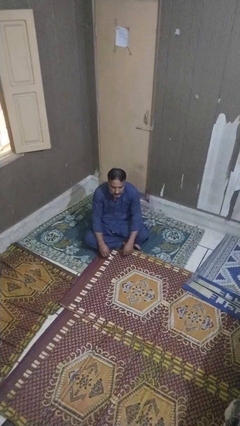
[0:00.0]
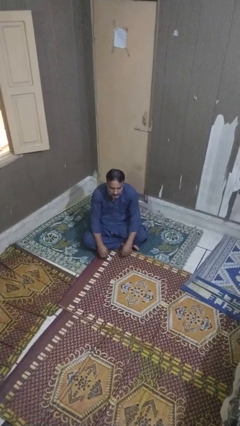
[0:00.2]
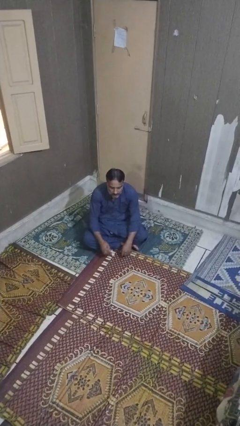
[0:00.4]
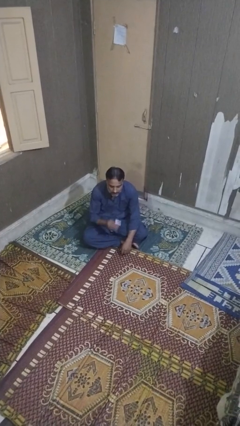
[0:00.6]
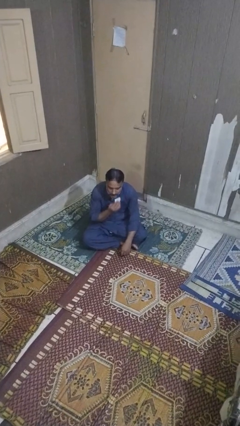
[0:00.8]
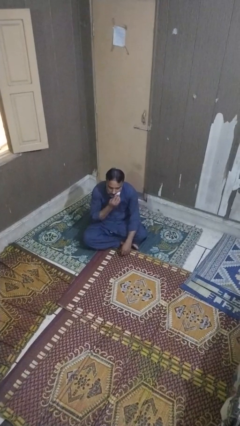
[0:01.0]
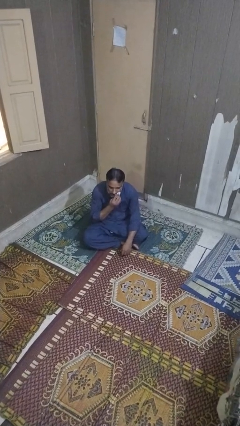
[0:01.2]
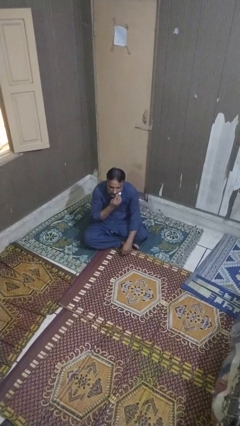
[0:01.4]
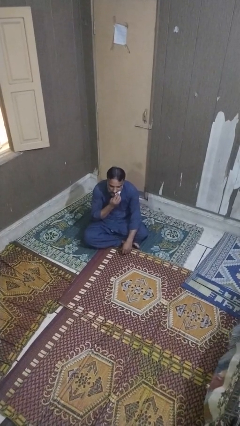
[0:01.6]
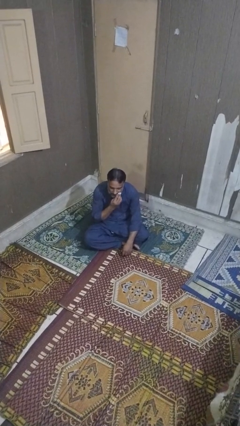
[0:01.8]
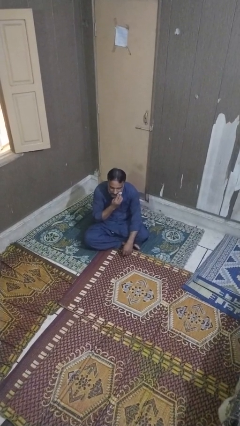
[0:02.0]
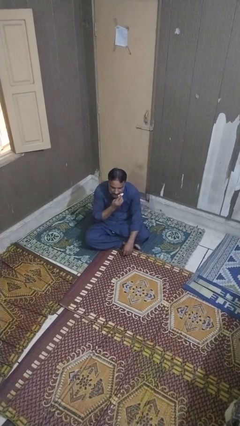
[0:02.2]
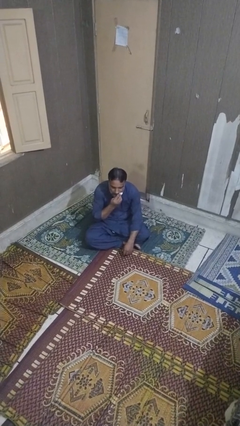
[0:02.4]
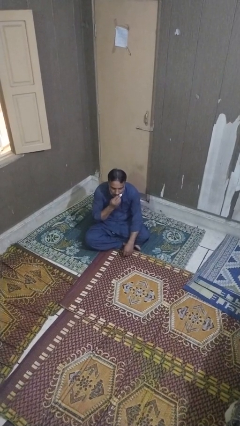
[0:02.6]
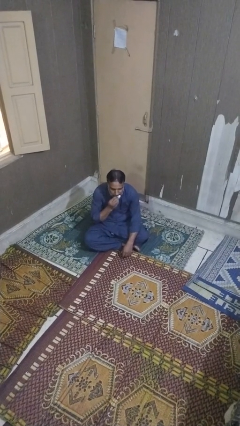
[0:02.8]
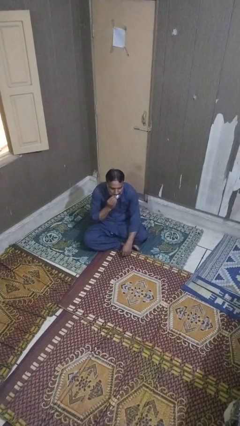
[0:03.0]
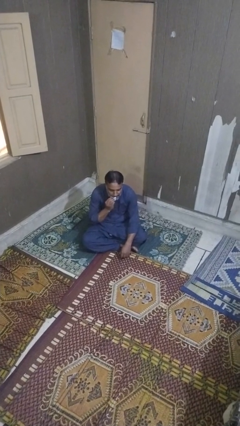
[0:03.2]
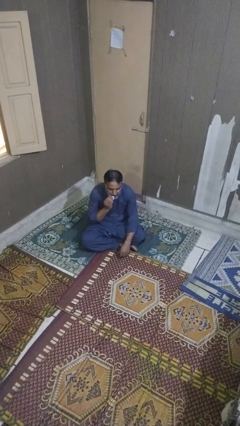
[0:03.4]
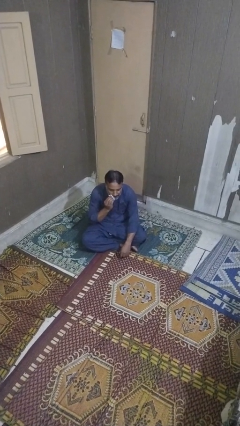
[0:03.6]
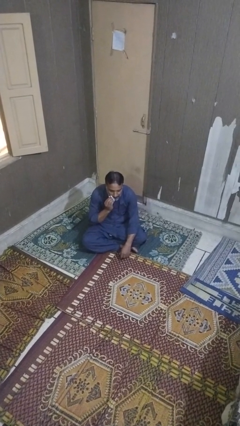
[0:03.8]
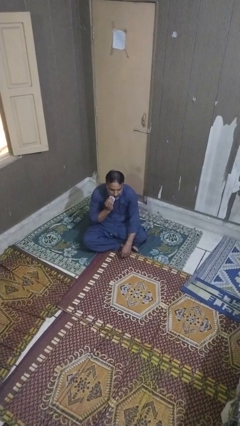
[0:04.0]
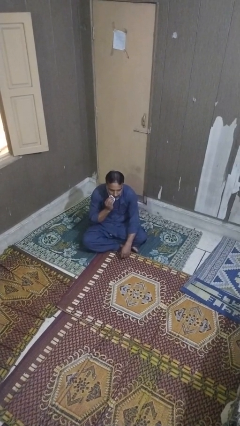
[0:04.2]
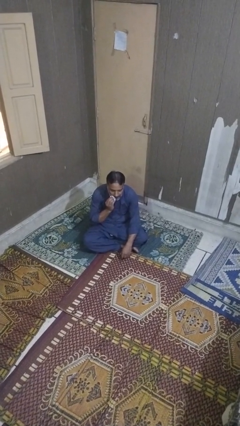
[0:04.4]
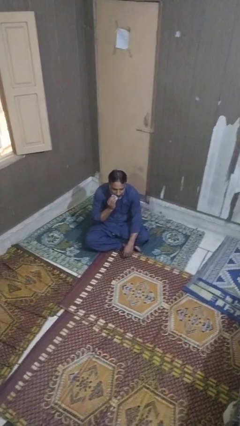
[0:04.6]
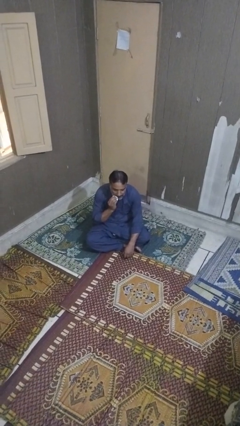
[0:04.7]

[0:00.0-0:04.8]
person wipes mouth with napkin

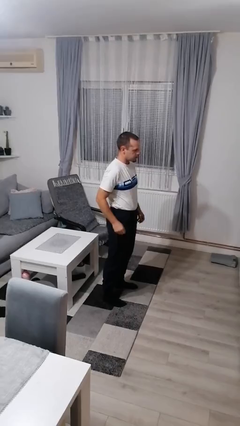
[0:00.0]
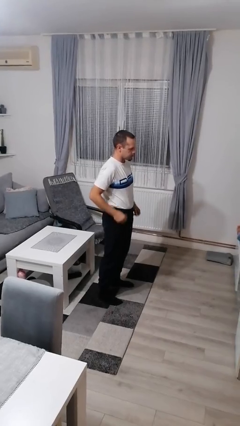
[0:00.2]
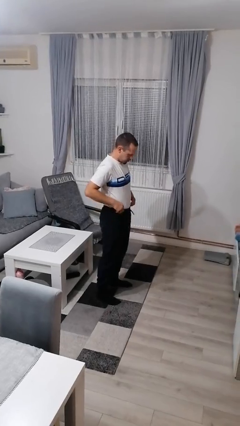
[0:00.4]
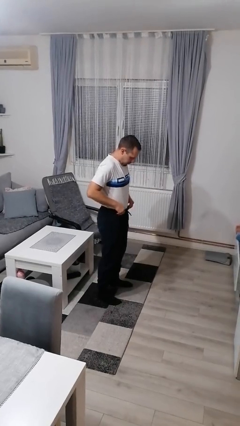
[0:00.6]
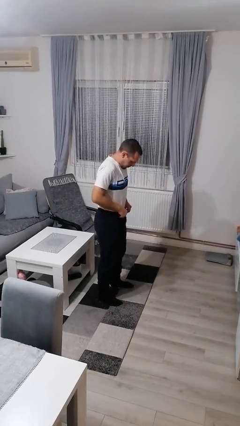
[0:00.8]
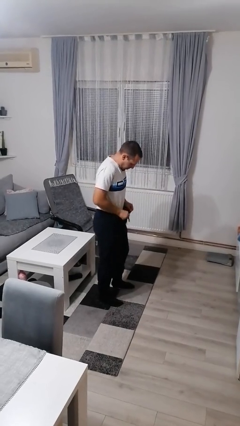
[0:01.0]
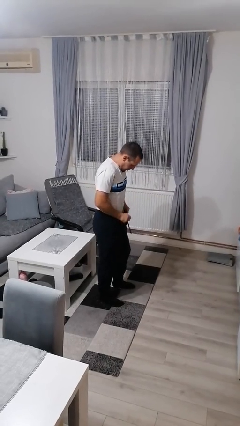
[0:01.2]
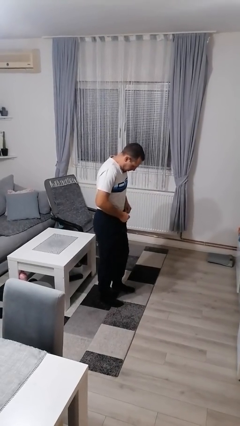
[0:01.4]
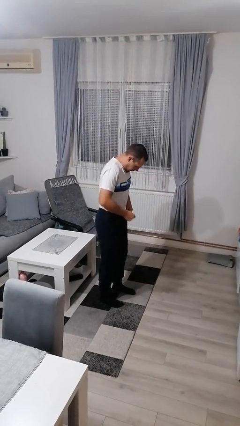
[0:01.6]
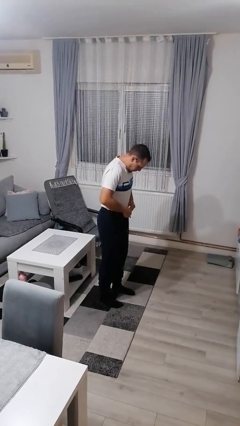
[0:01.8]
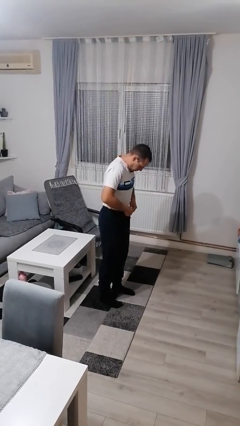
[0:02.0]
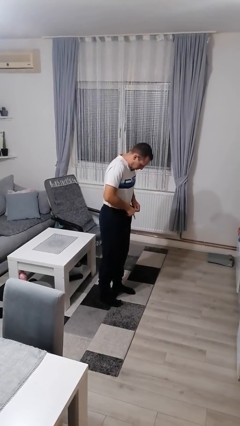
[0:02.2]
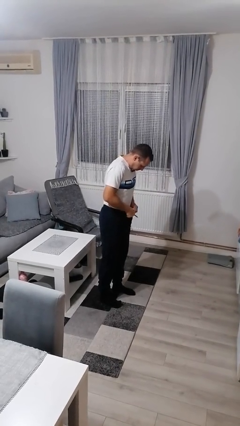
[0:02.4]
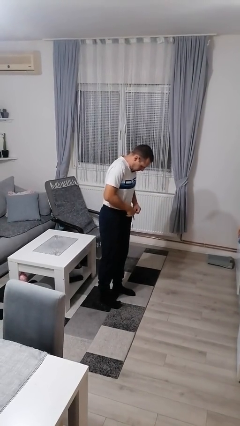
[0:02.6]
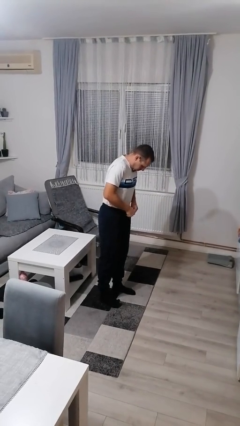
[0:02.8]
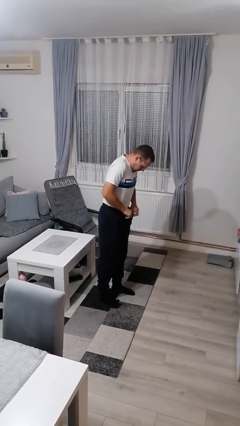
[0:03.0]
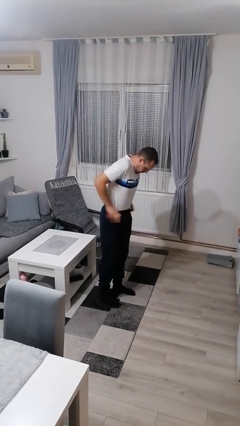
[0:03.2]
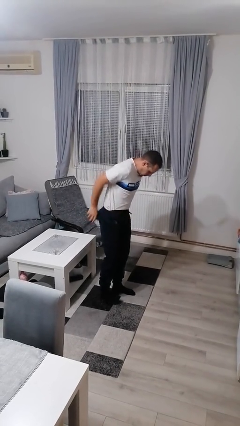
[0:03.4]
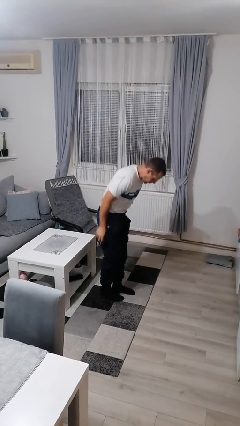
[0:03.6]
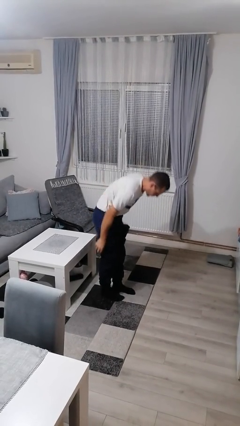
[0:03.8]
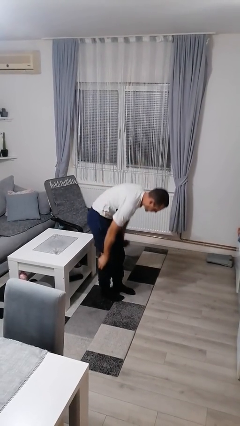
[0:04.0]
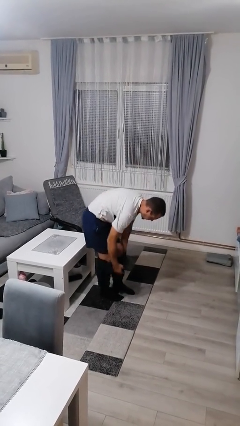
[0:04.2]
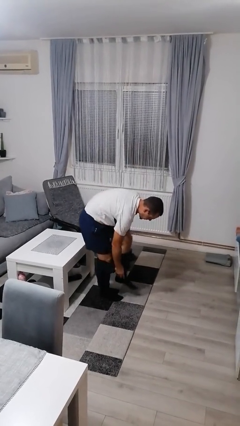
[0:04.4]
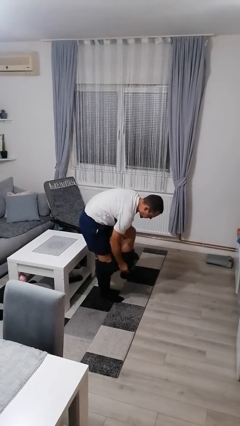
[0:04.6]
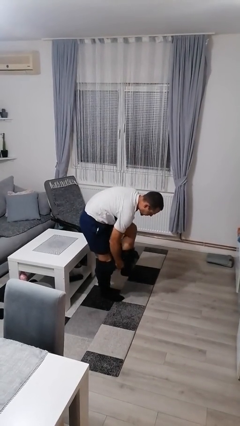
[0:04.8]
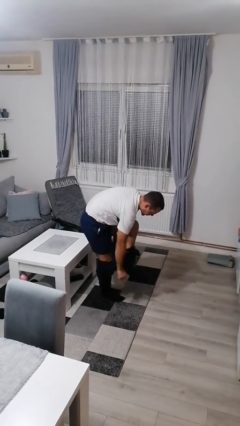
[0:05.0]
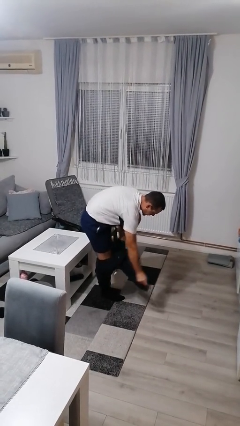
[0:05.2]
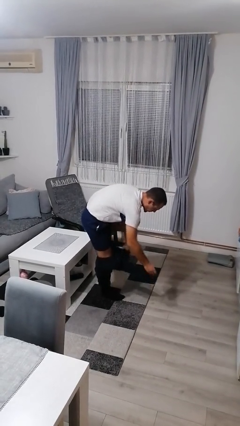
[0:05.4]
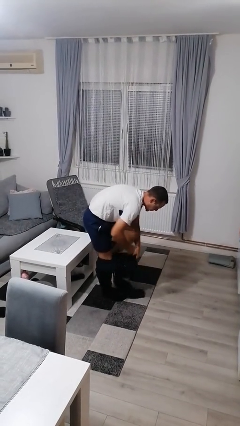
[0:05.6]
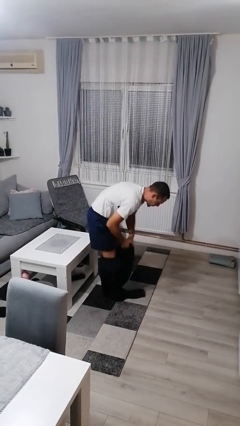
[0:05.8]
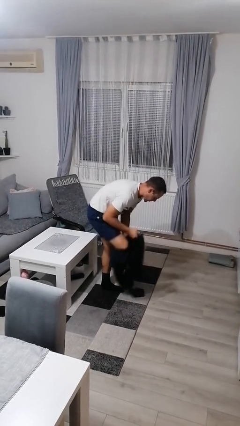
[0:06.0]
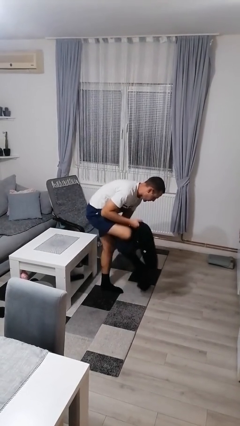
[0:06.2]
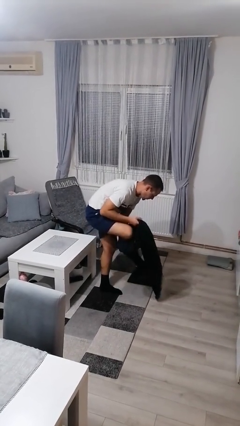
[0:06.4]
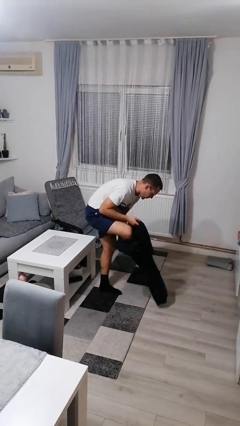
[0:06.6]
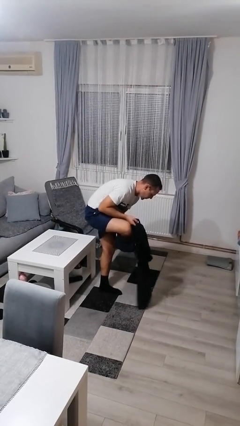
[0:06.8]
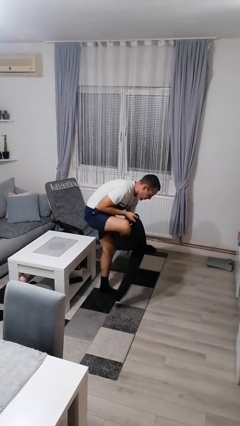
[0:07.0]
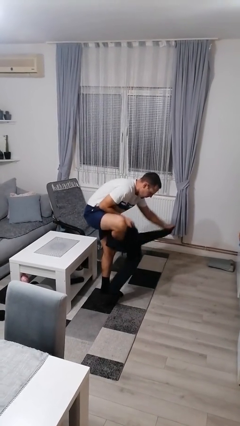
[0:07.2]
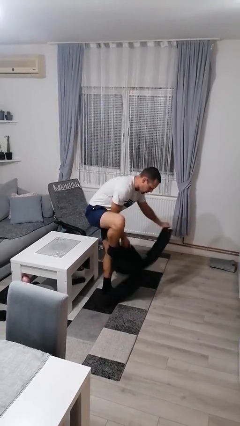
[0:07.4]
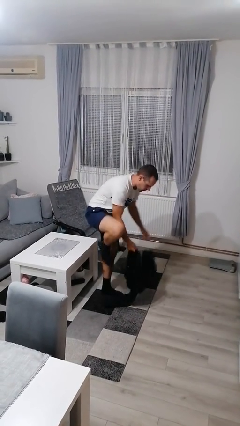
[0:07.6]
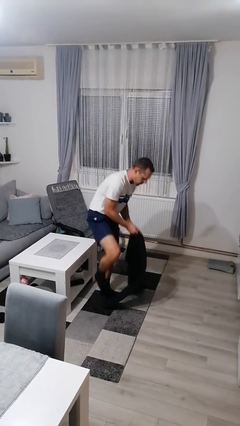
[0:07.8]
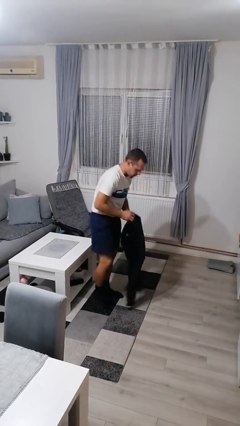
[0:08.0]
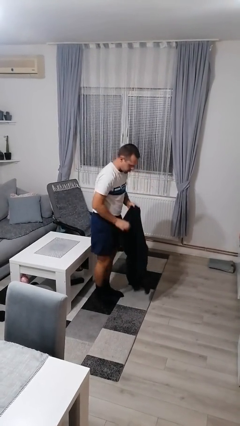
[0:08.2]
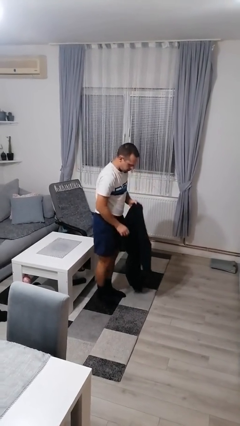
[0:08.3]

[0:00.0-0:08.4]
person puts on pants

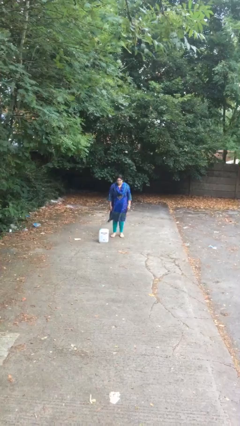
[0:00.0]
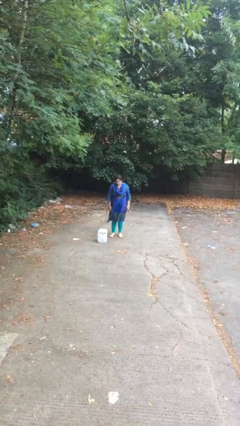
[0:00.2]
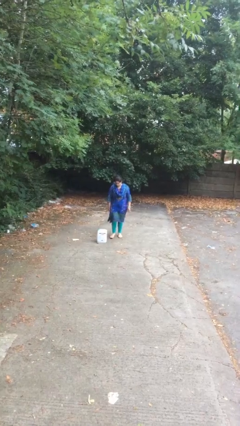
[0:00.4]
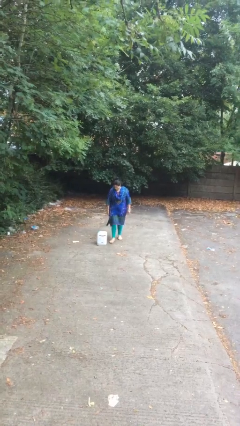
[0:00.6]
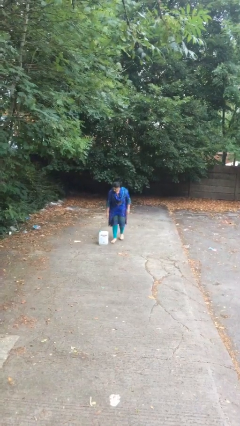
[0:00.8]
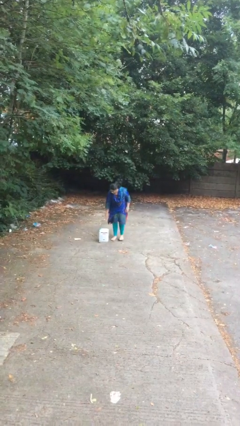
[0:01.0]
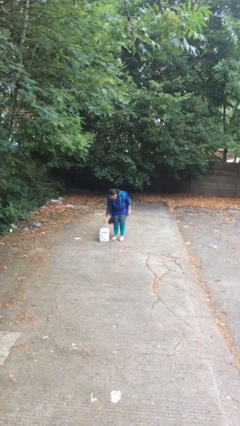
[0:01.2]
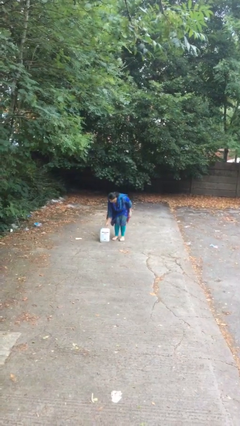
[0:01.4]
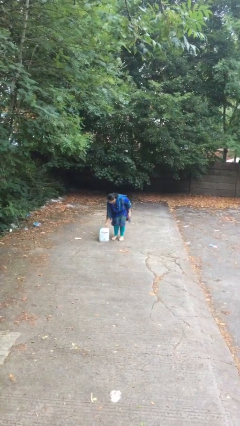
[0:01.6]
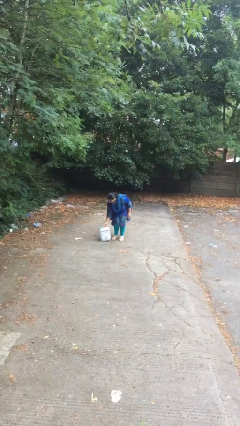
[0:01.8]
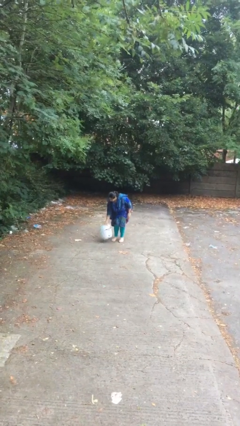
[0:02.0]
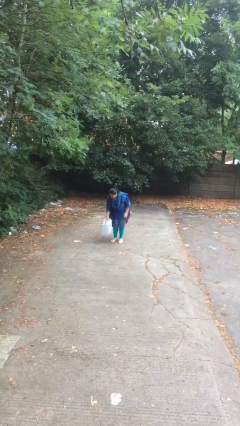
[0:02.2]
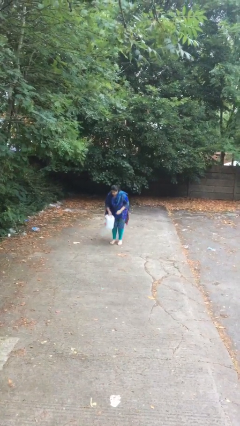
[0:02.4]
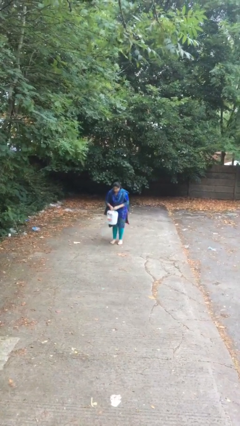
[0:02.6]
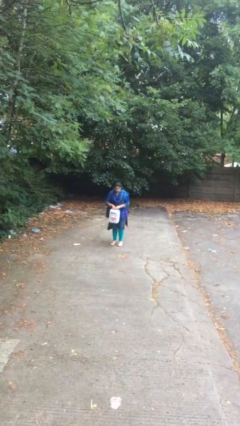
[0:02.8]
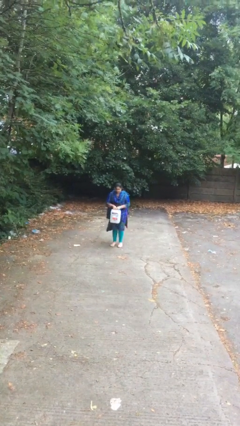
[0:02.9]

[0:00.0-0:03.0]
person picks up object from floor

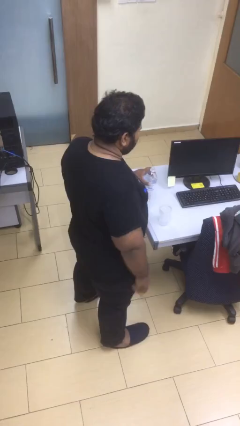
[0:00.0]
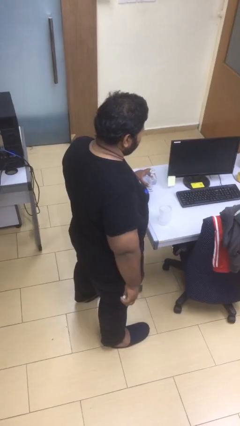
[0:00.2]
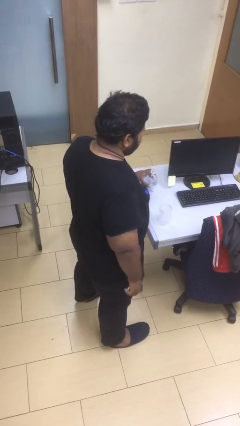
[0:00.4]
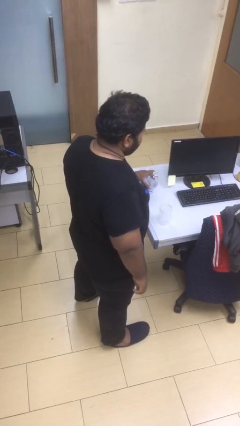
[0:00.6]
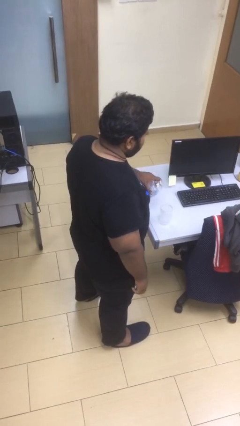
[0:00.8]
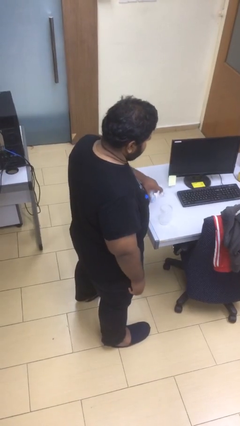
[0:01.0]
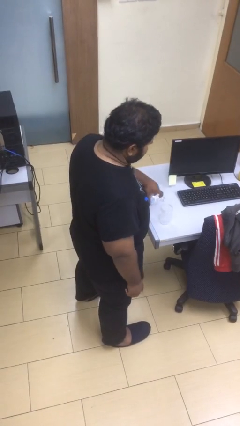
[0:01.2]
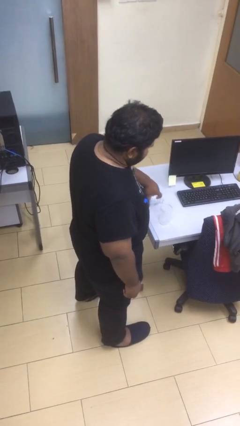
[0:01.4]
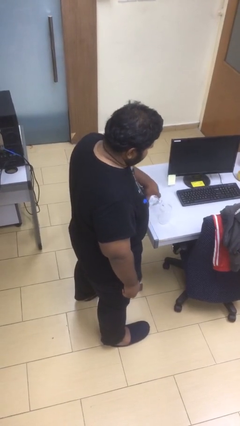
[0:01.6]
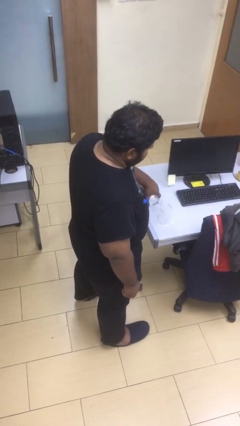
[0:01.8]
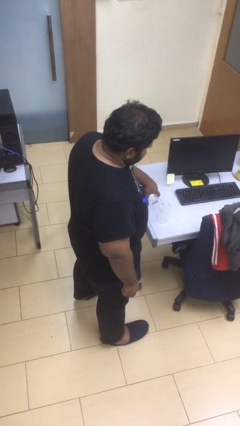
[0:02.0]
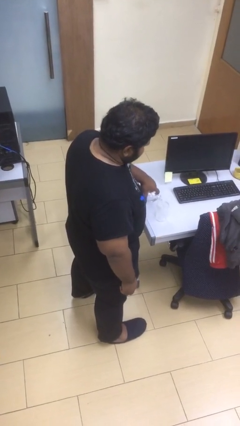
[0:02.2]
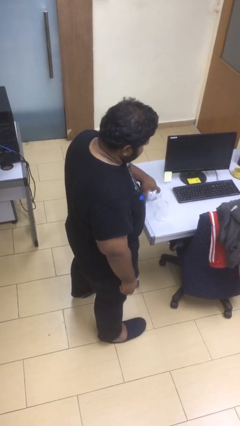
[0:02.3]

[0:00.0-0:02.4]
person pours liquid into cup
